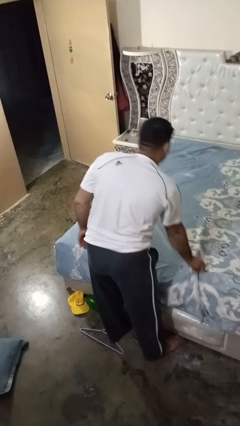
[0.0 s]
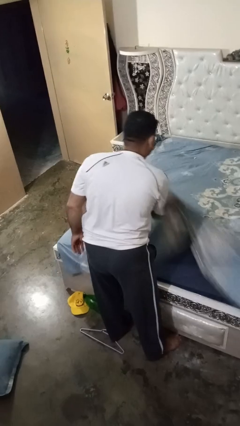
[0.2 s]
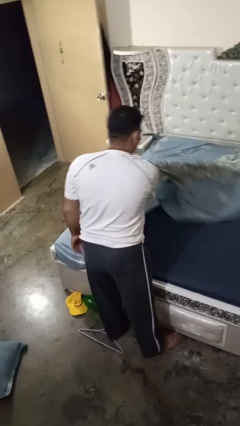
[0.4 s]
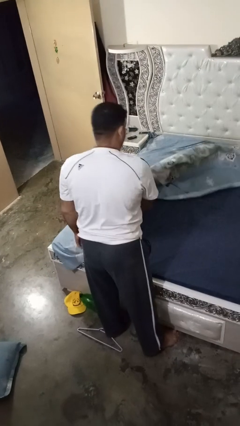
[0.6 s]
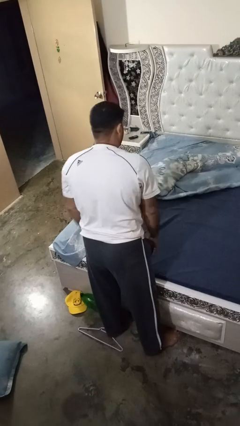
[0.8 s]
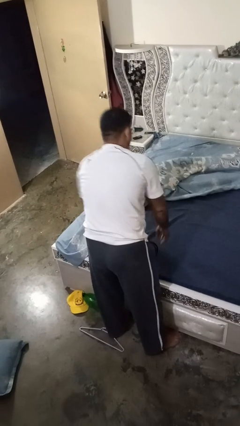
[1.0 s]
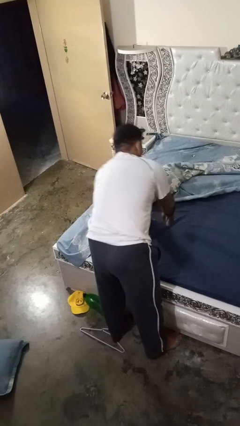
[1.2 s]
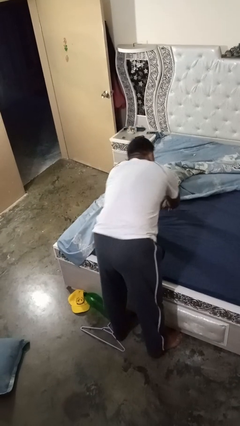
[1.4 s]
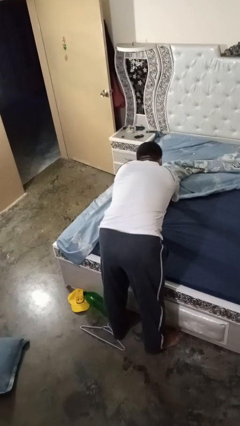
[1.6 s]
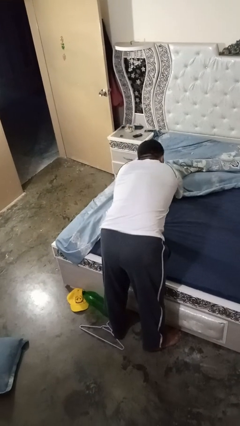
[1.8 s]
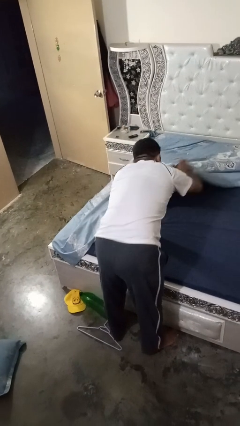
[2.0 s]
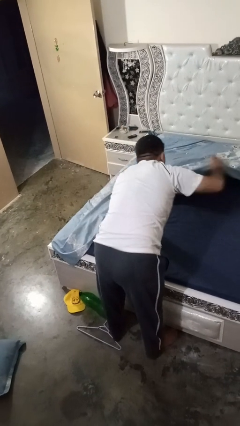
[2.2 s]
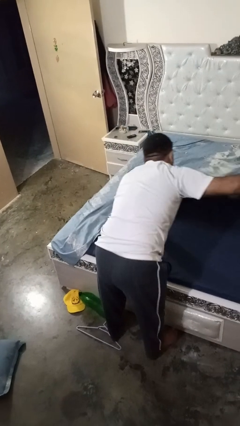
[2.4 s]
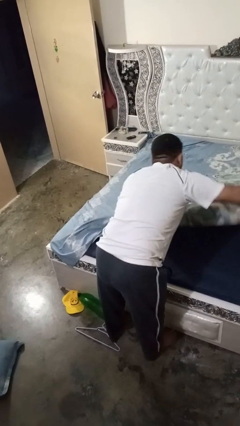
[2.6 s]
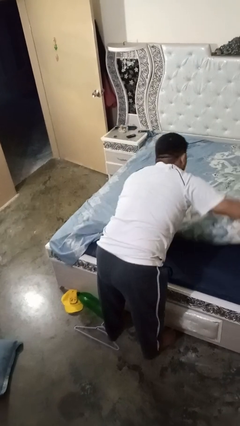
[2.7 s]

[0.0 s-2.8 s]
person makes bed

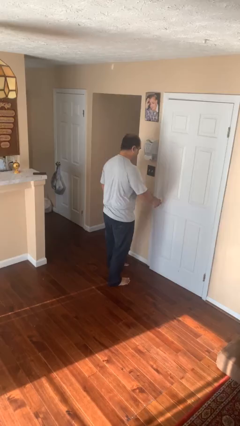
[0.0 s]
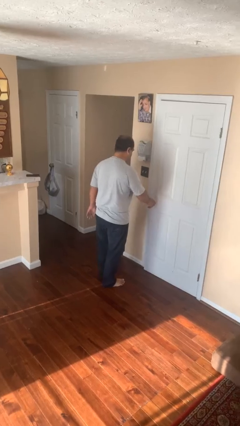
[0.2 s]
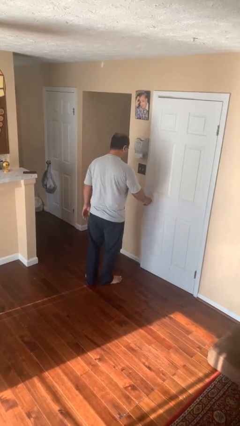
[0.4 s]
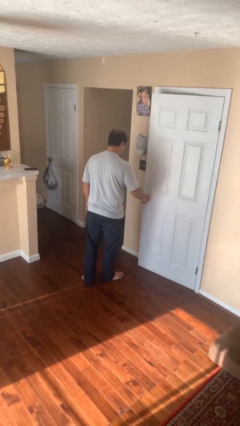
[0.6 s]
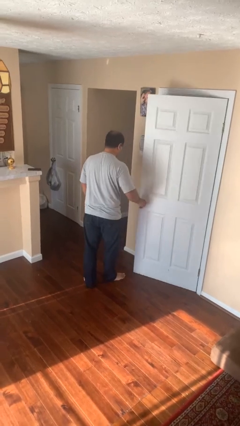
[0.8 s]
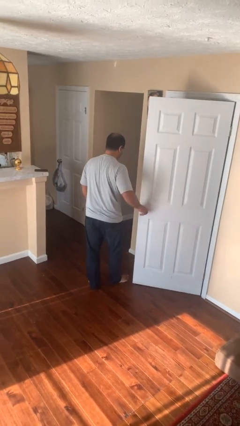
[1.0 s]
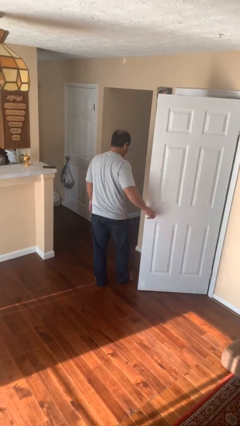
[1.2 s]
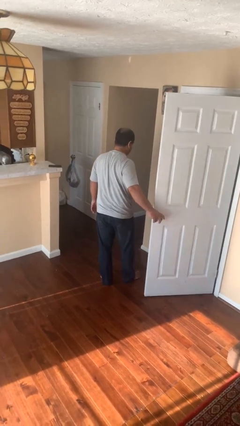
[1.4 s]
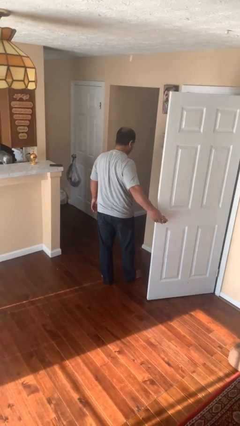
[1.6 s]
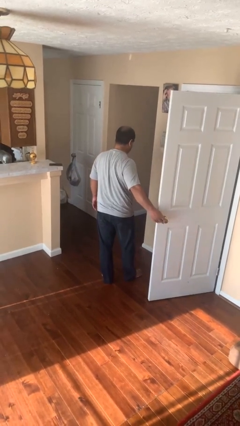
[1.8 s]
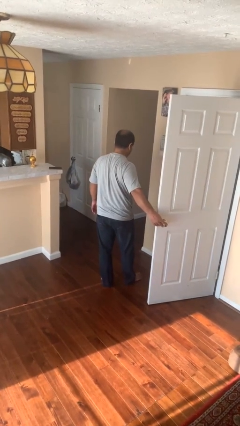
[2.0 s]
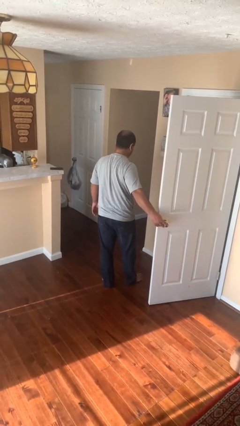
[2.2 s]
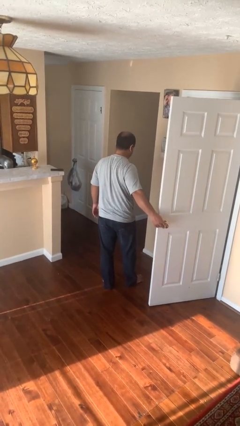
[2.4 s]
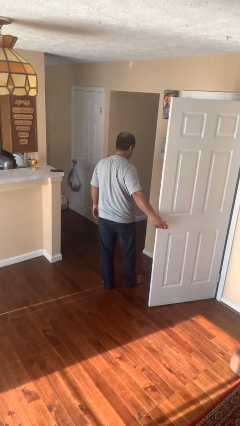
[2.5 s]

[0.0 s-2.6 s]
person opens facility door

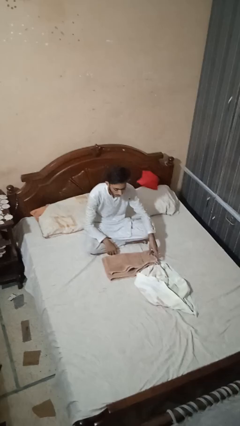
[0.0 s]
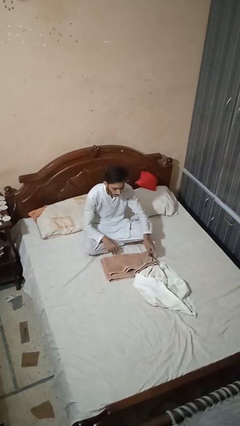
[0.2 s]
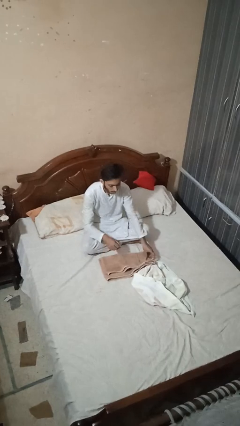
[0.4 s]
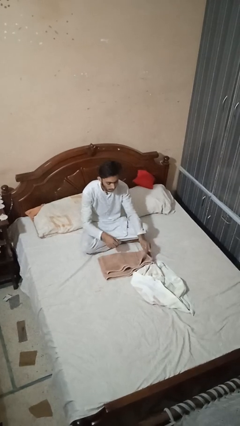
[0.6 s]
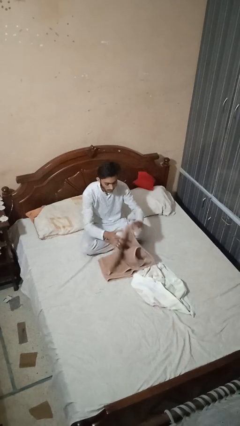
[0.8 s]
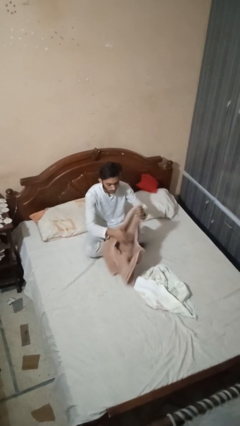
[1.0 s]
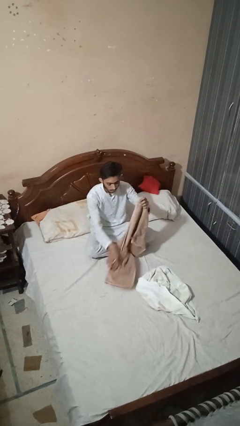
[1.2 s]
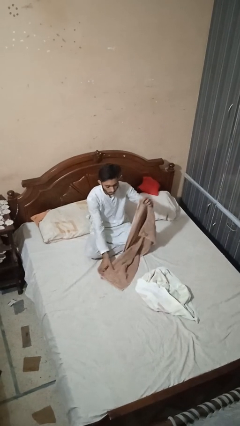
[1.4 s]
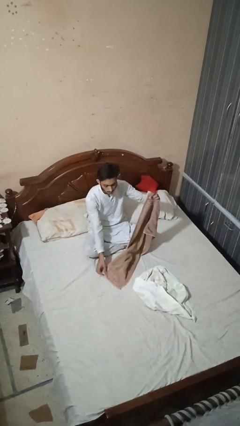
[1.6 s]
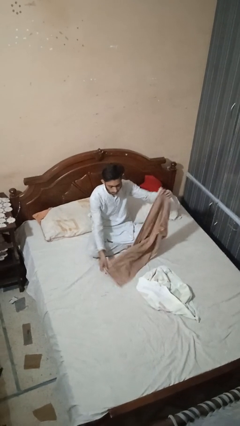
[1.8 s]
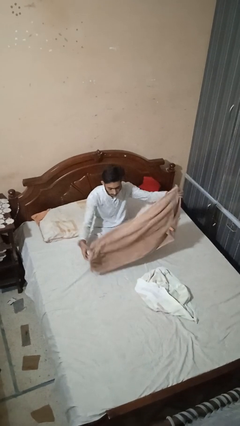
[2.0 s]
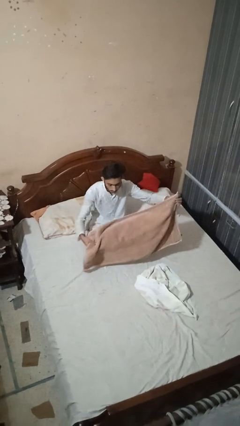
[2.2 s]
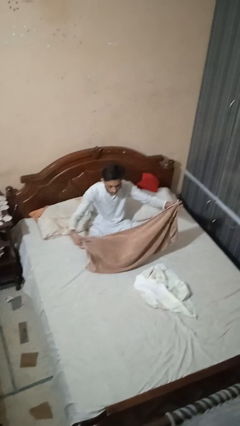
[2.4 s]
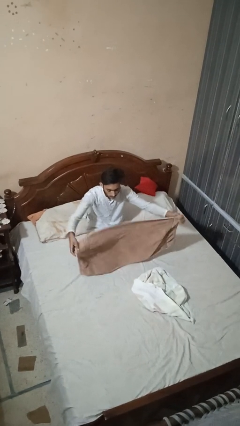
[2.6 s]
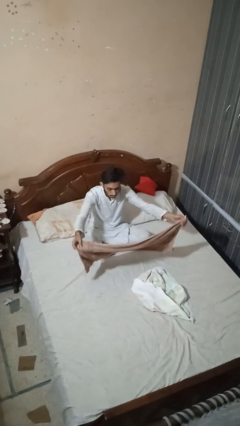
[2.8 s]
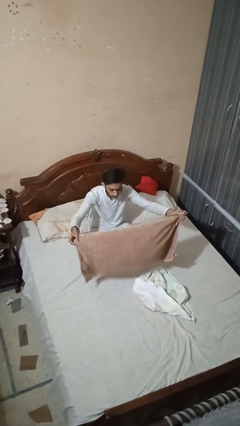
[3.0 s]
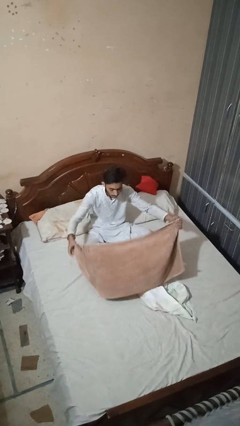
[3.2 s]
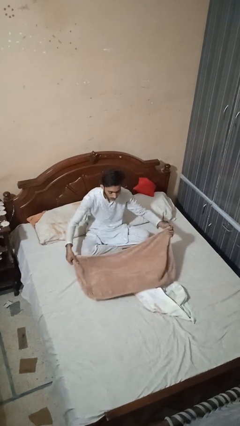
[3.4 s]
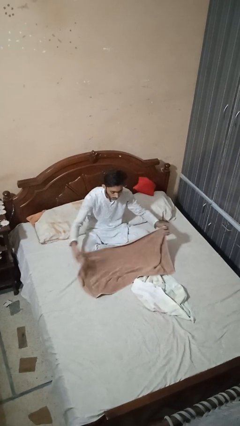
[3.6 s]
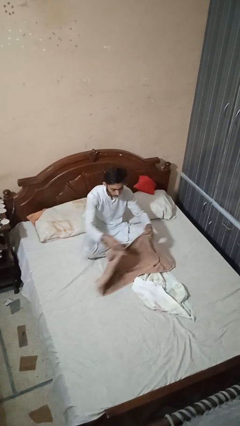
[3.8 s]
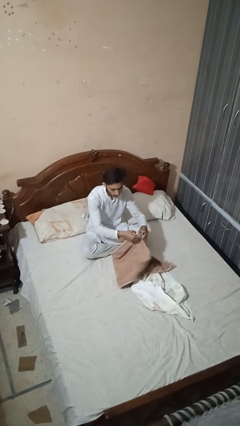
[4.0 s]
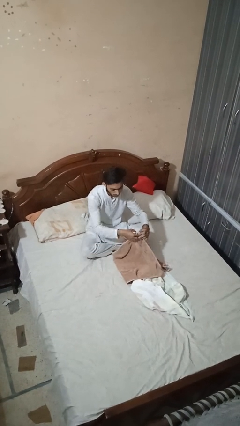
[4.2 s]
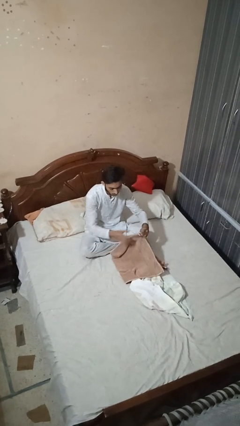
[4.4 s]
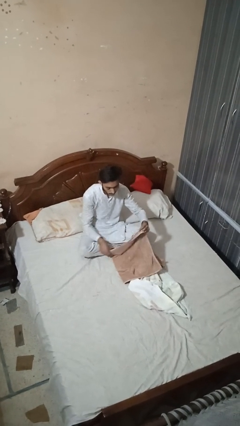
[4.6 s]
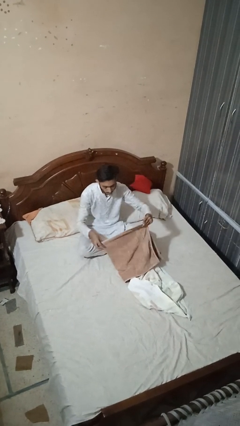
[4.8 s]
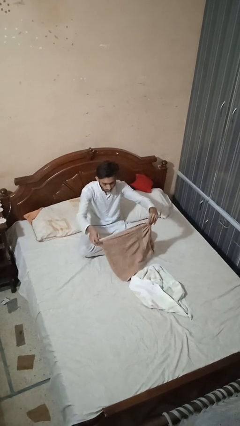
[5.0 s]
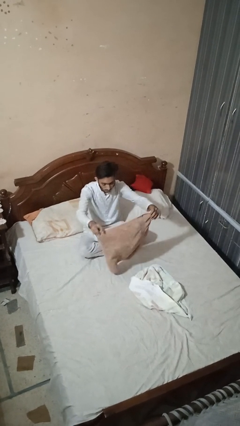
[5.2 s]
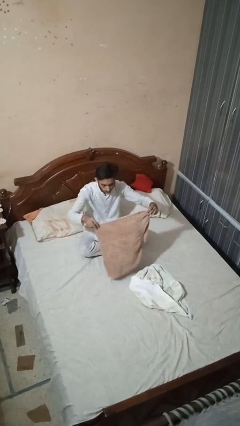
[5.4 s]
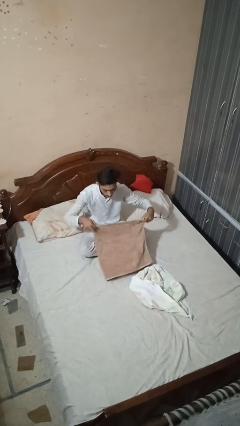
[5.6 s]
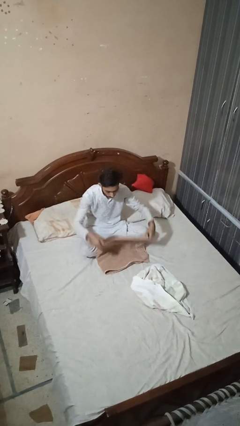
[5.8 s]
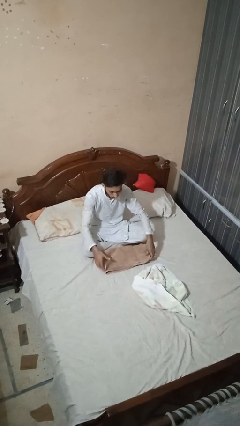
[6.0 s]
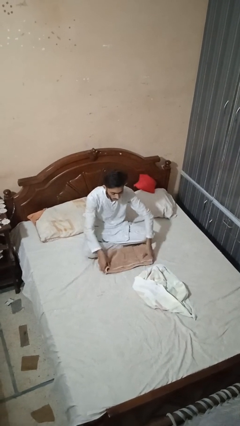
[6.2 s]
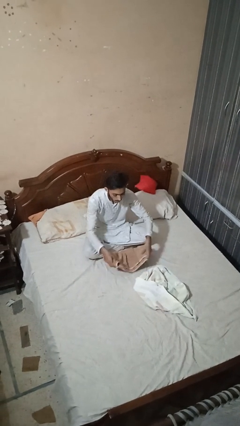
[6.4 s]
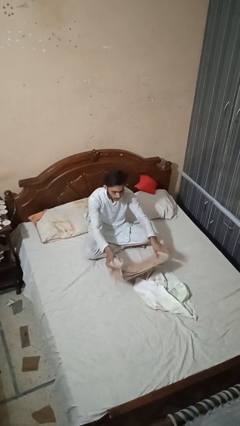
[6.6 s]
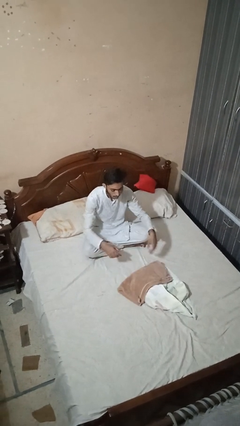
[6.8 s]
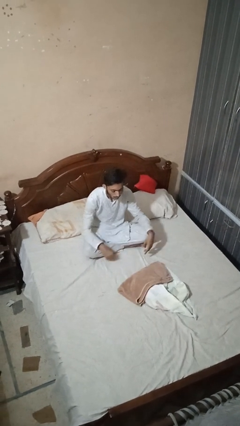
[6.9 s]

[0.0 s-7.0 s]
person folds towel

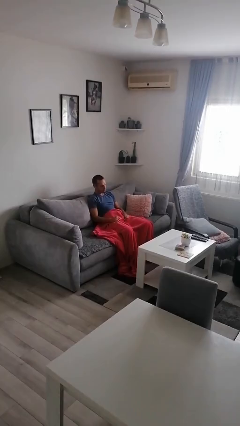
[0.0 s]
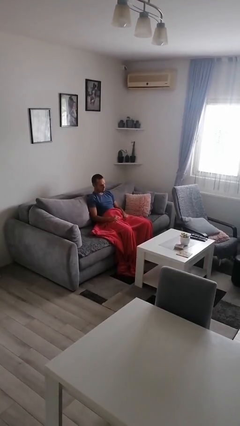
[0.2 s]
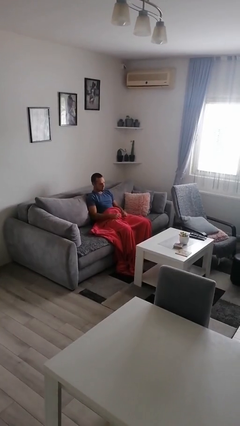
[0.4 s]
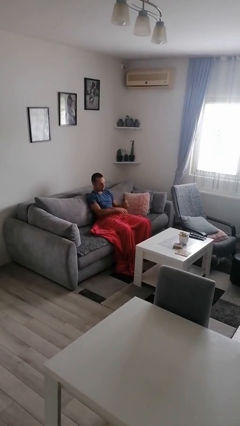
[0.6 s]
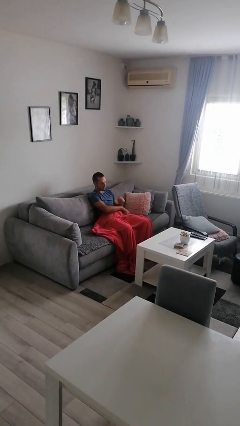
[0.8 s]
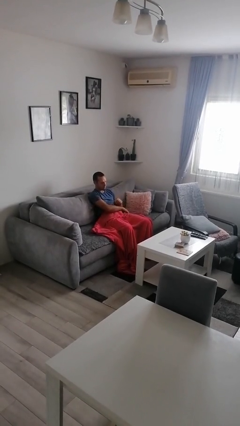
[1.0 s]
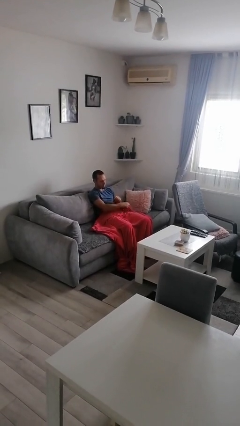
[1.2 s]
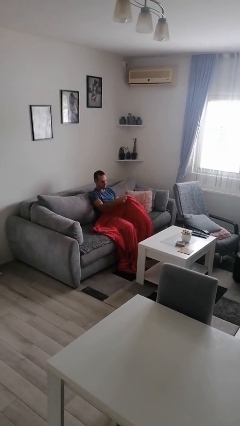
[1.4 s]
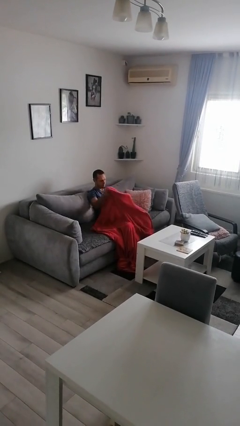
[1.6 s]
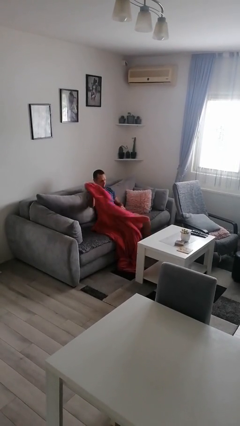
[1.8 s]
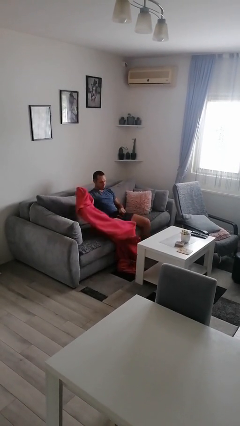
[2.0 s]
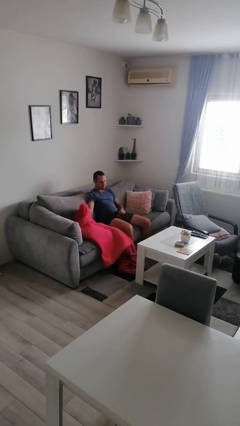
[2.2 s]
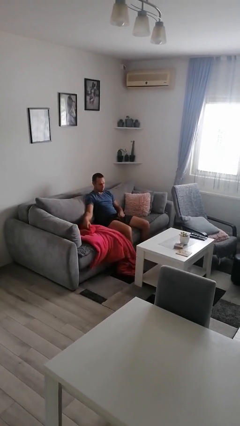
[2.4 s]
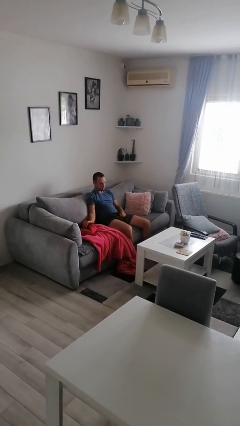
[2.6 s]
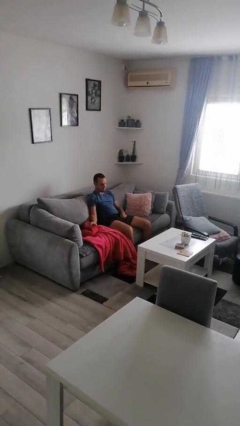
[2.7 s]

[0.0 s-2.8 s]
person uncovers with blanket

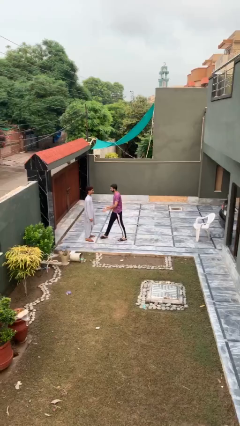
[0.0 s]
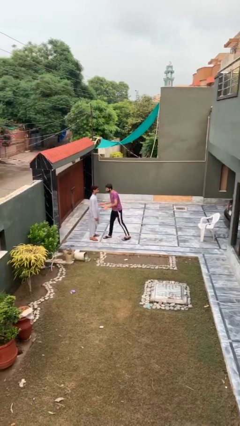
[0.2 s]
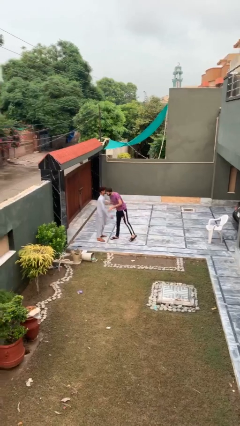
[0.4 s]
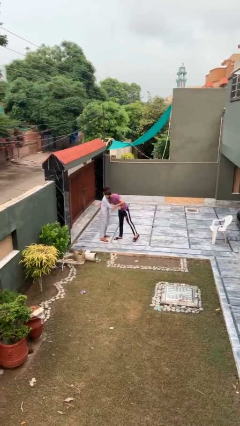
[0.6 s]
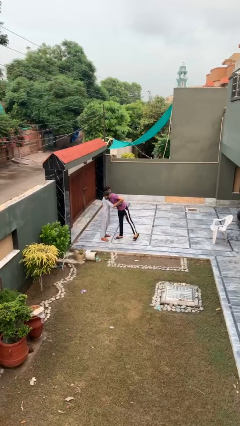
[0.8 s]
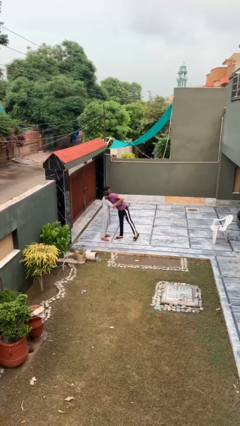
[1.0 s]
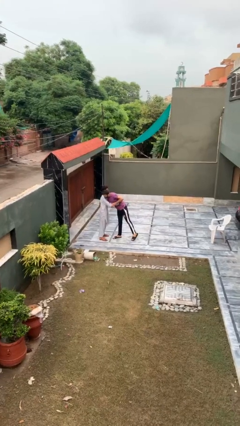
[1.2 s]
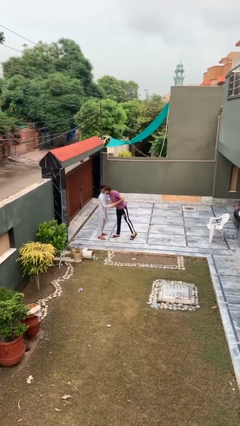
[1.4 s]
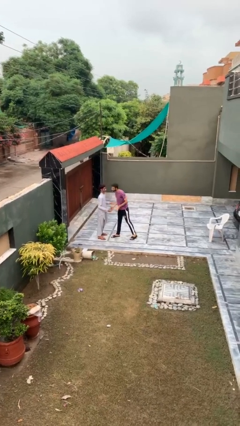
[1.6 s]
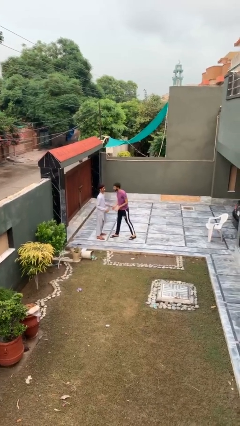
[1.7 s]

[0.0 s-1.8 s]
person embraces person

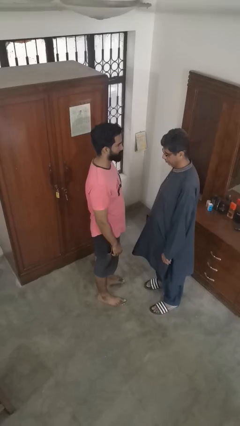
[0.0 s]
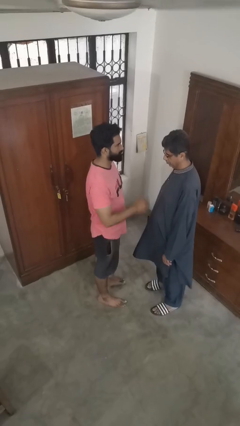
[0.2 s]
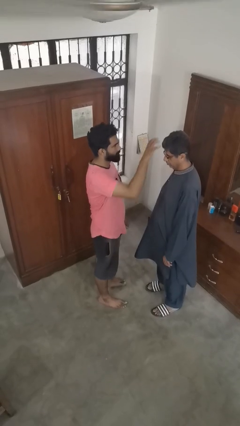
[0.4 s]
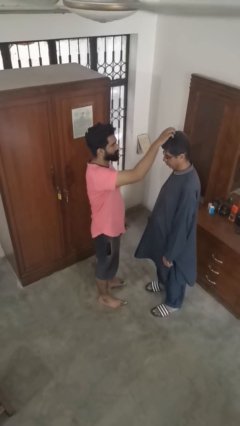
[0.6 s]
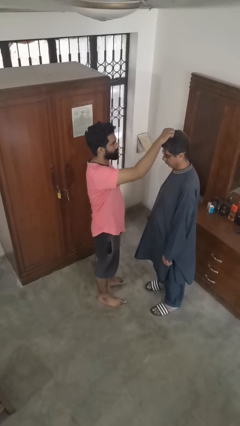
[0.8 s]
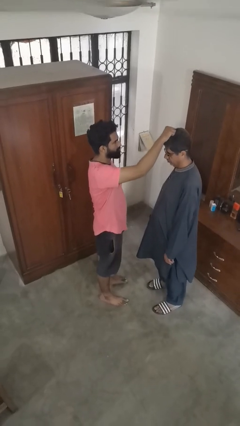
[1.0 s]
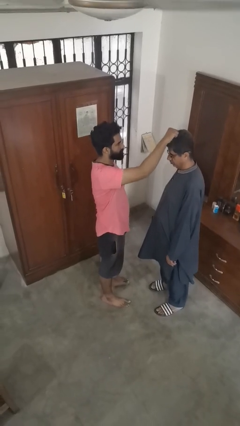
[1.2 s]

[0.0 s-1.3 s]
person grabs person by hair
